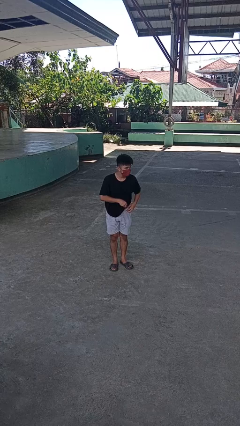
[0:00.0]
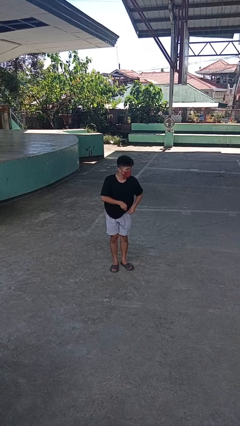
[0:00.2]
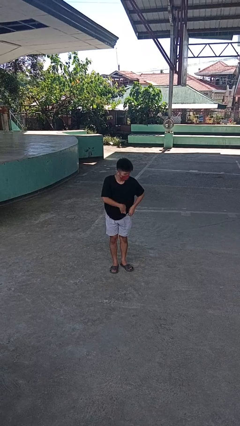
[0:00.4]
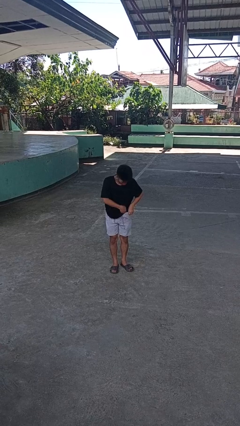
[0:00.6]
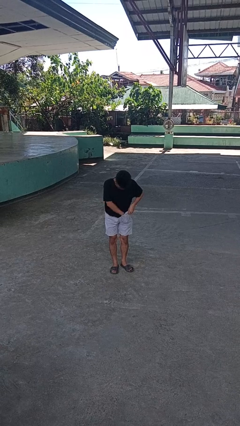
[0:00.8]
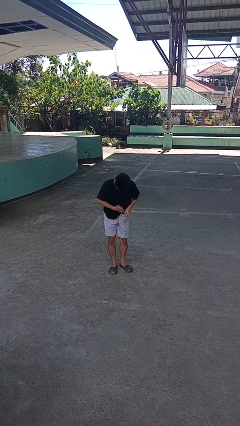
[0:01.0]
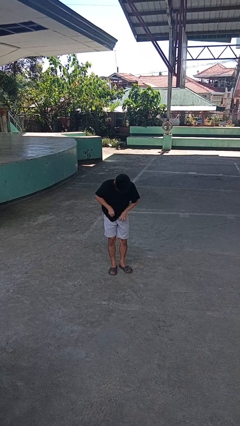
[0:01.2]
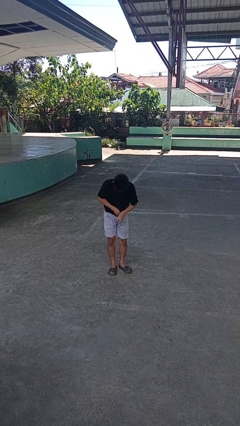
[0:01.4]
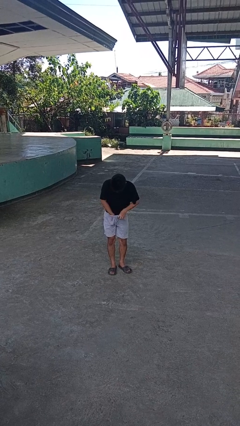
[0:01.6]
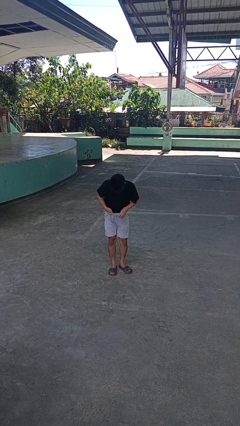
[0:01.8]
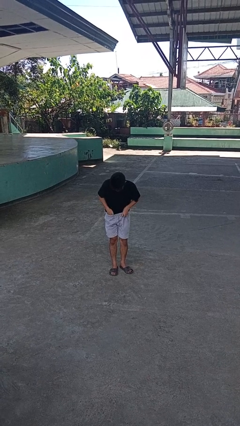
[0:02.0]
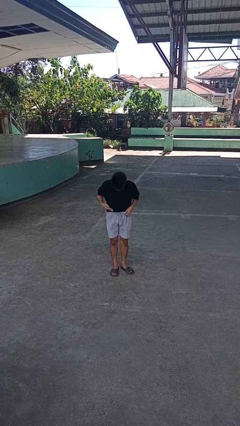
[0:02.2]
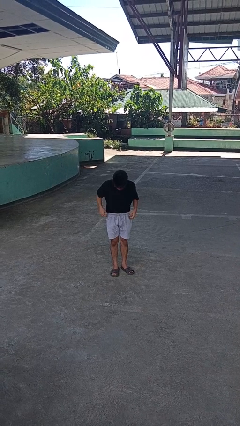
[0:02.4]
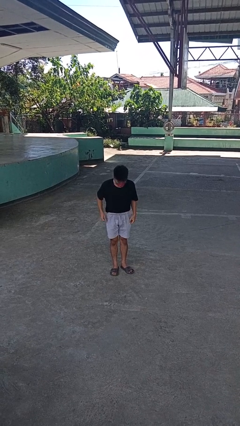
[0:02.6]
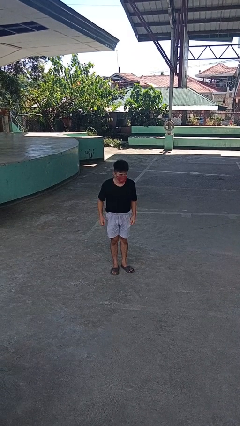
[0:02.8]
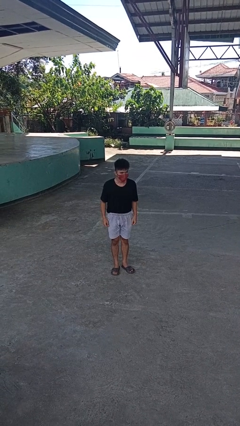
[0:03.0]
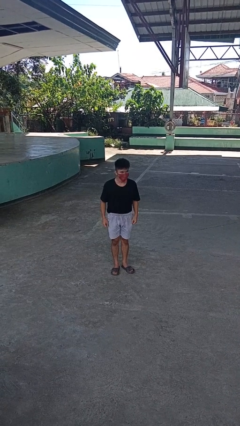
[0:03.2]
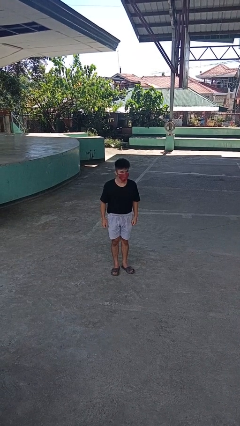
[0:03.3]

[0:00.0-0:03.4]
person tucks in shirt

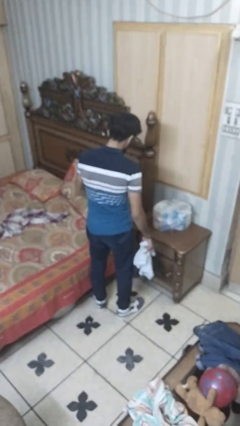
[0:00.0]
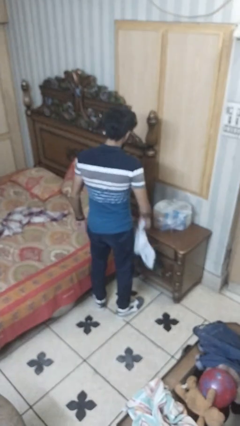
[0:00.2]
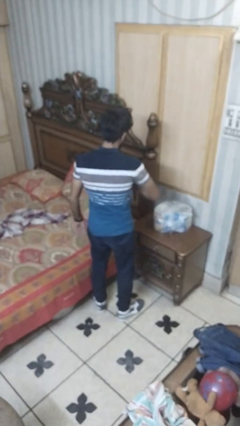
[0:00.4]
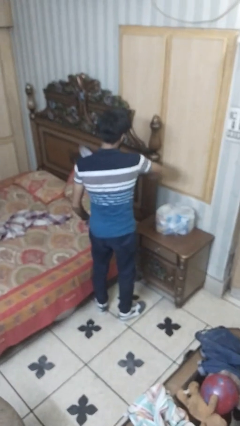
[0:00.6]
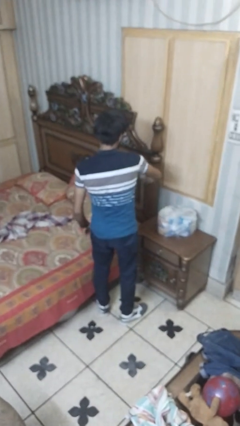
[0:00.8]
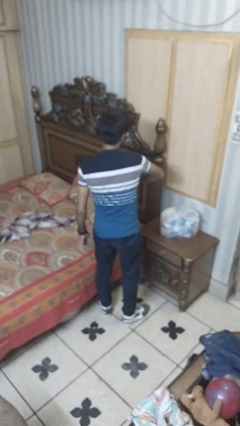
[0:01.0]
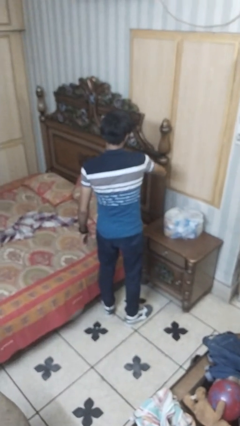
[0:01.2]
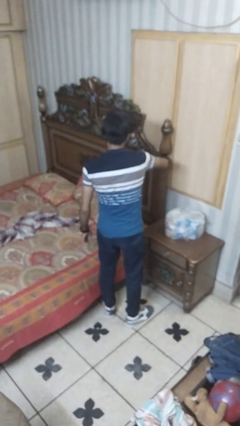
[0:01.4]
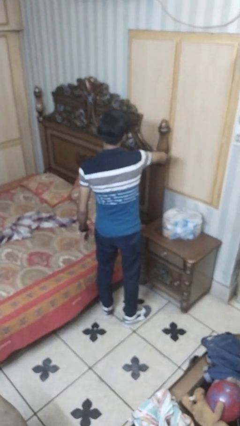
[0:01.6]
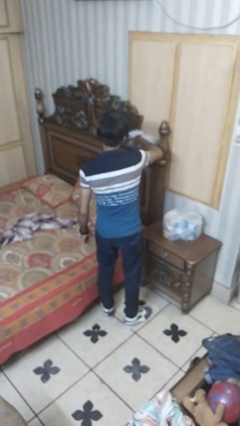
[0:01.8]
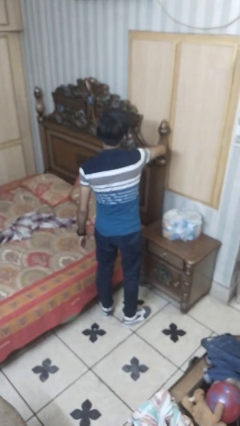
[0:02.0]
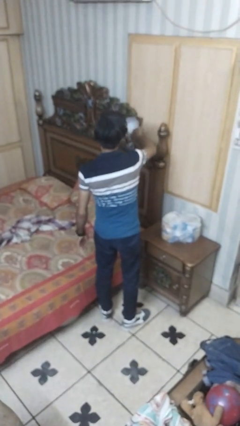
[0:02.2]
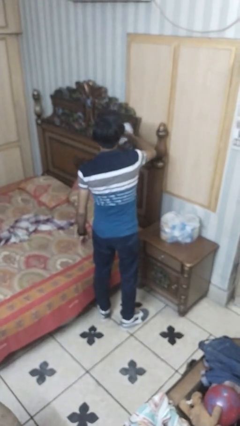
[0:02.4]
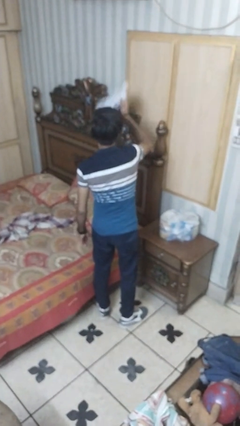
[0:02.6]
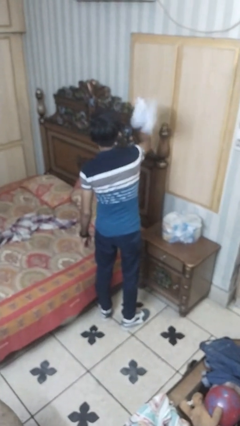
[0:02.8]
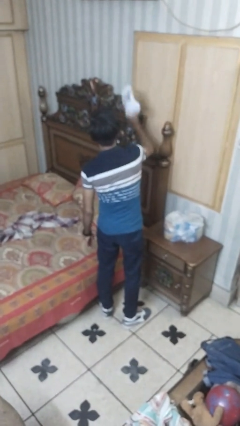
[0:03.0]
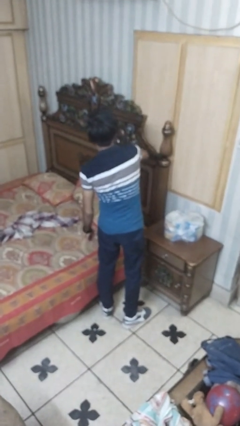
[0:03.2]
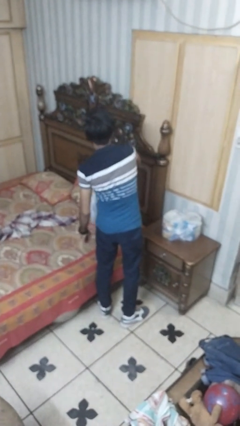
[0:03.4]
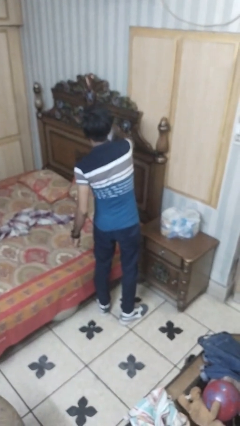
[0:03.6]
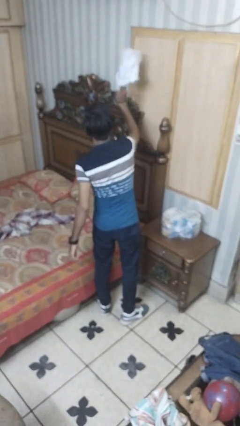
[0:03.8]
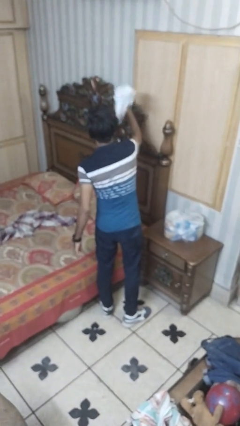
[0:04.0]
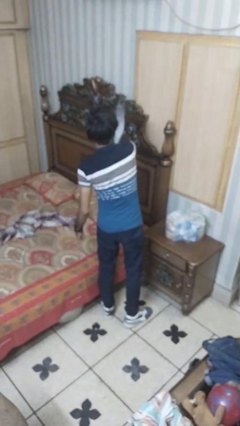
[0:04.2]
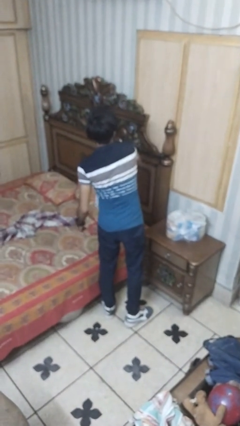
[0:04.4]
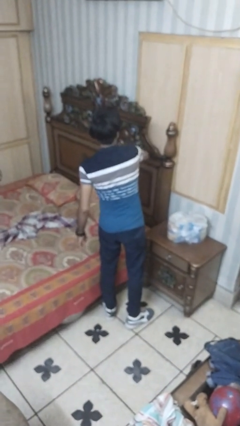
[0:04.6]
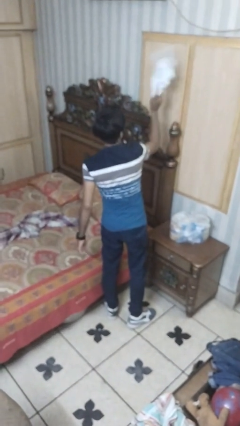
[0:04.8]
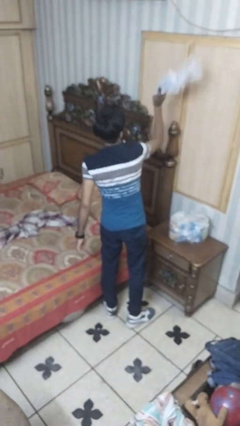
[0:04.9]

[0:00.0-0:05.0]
person dusts furniture

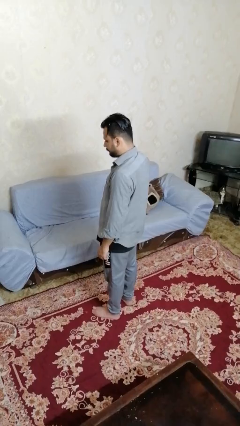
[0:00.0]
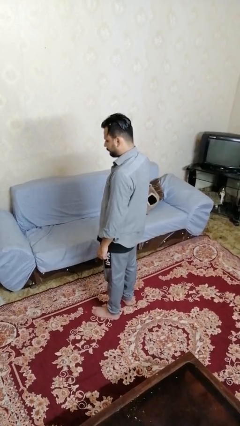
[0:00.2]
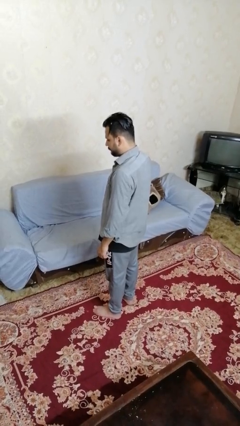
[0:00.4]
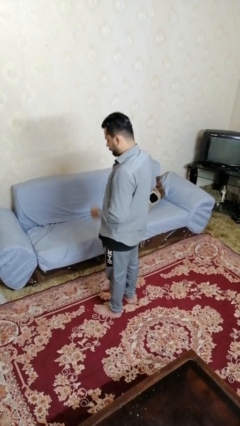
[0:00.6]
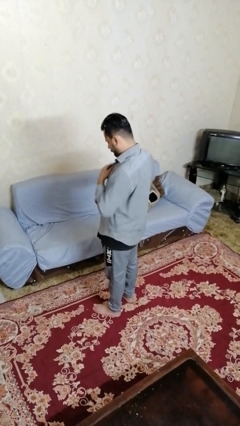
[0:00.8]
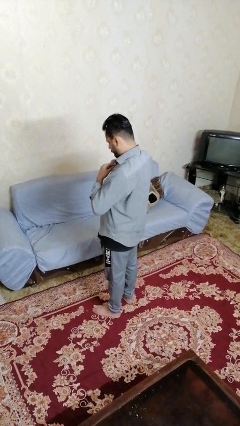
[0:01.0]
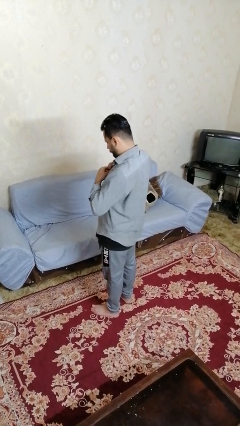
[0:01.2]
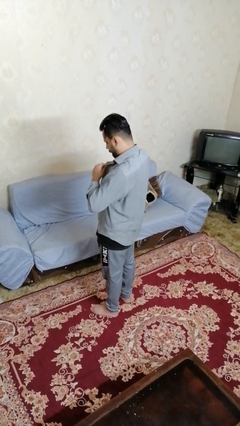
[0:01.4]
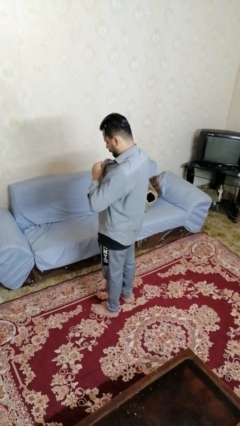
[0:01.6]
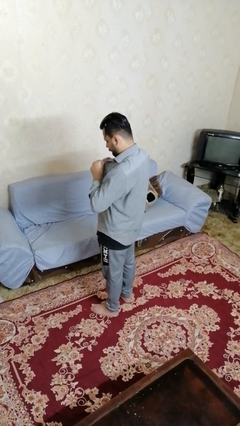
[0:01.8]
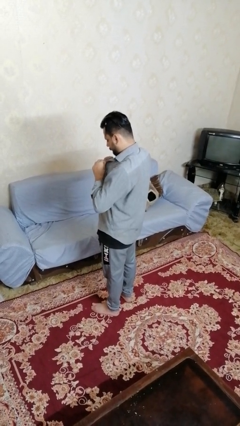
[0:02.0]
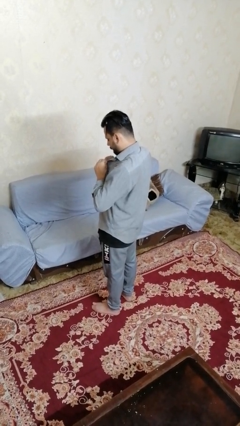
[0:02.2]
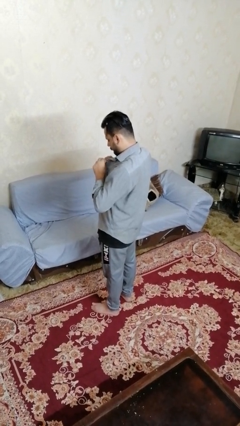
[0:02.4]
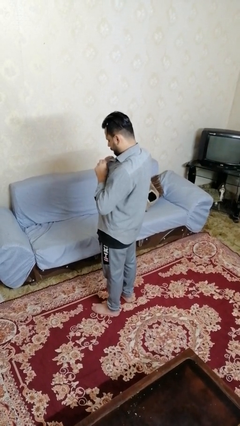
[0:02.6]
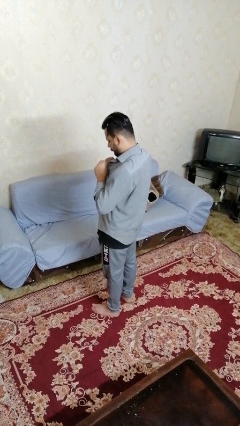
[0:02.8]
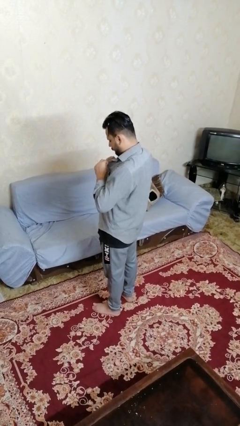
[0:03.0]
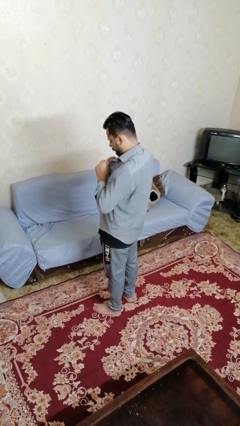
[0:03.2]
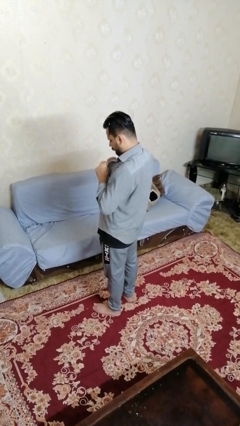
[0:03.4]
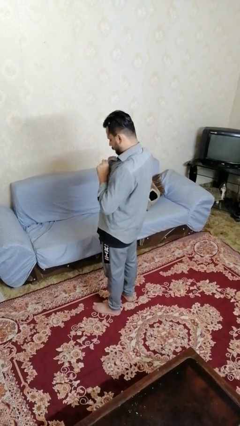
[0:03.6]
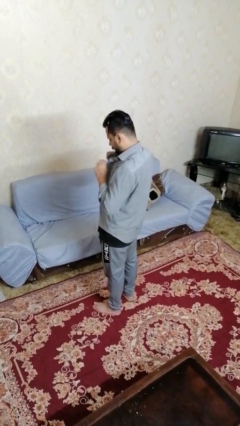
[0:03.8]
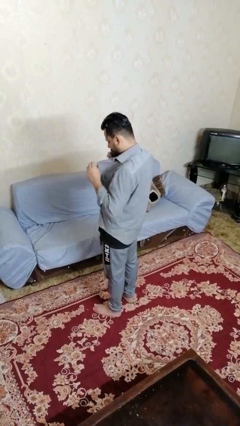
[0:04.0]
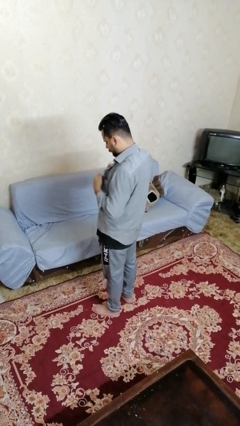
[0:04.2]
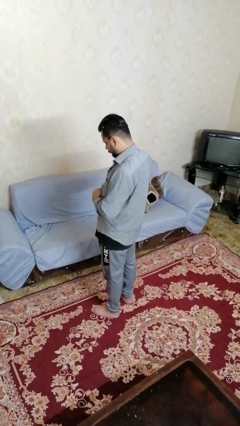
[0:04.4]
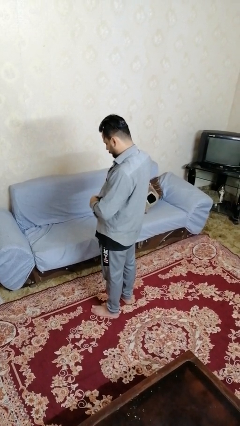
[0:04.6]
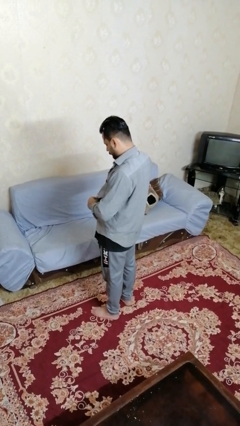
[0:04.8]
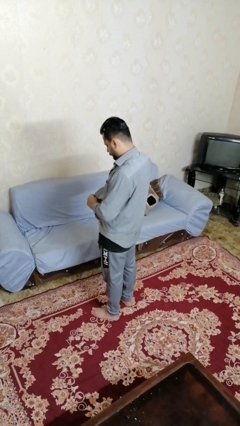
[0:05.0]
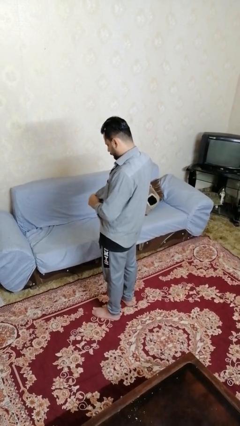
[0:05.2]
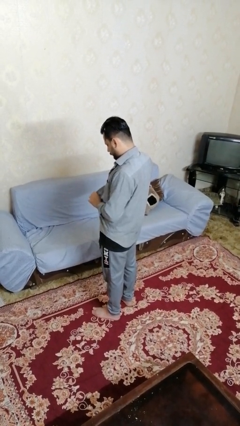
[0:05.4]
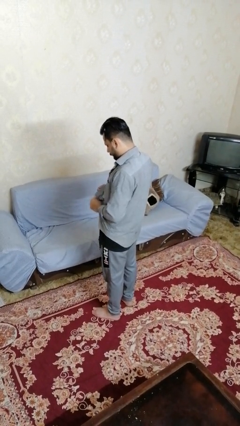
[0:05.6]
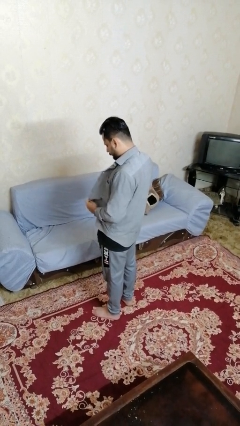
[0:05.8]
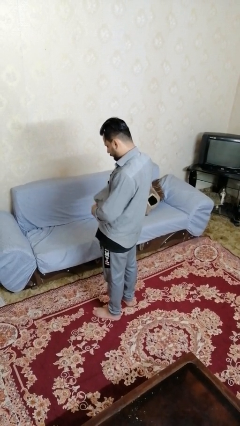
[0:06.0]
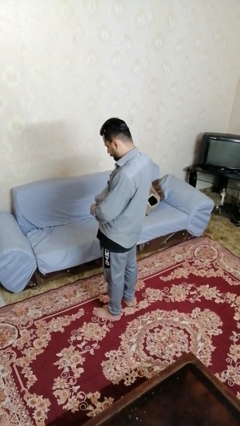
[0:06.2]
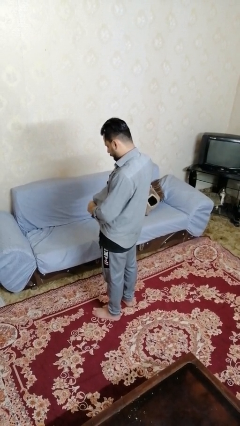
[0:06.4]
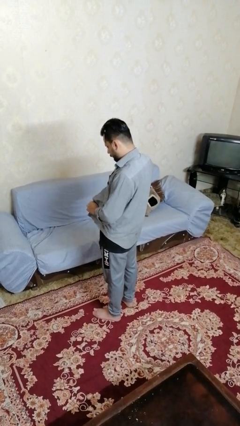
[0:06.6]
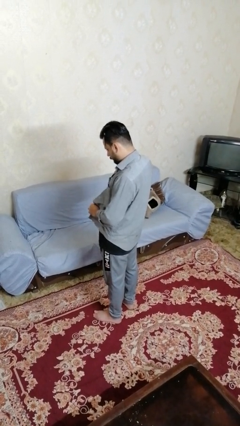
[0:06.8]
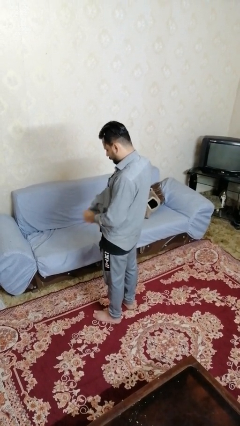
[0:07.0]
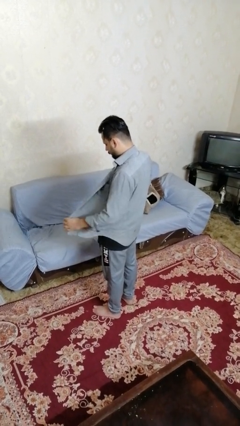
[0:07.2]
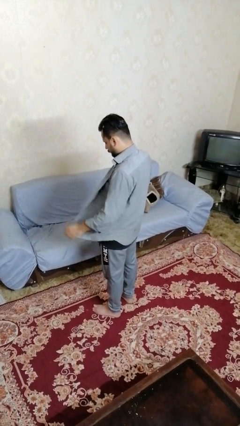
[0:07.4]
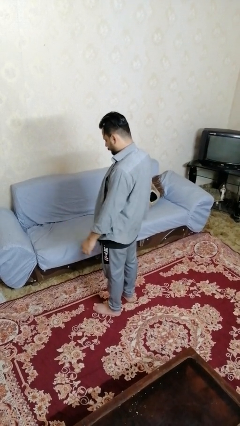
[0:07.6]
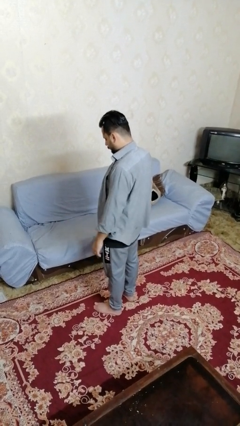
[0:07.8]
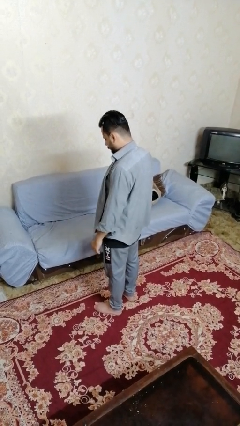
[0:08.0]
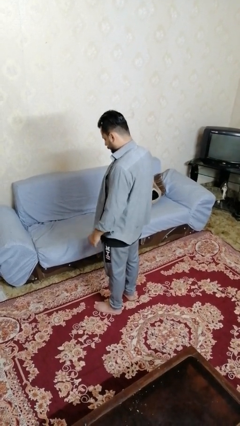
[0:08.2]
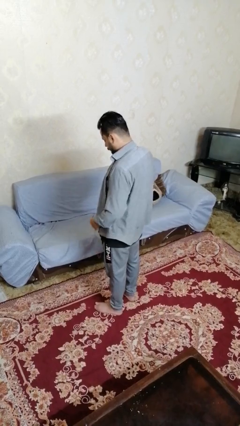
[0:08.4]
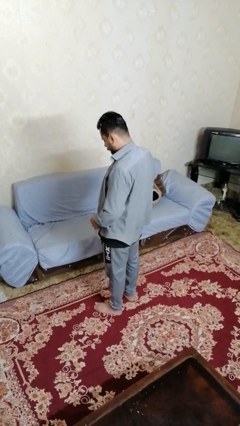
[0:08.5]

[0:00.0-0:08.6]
person unbuttons shirt

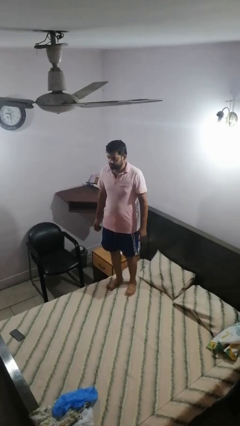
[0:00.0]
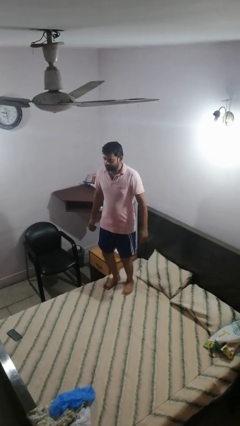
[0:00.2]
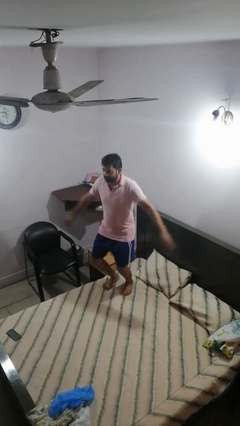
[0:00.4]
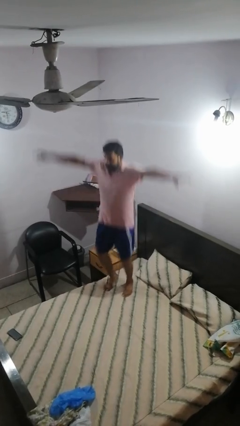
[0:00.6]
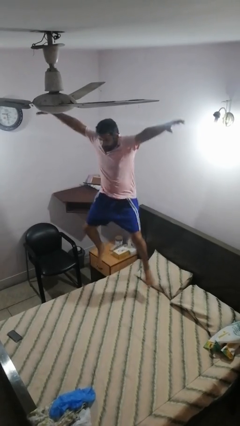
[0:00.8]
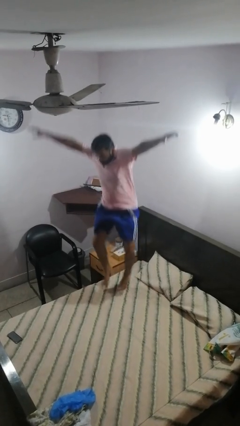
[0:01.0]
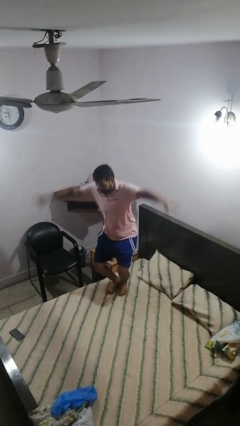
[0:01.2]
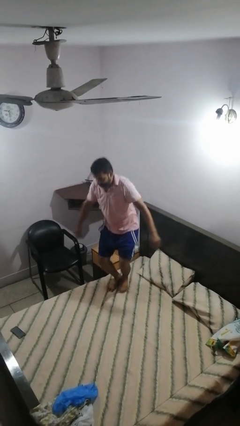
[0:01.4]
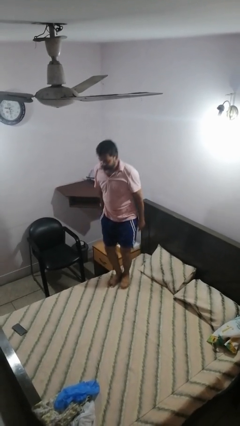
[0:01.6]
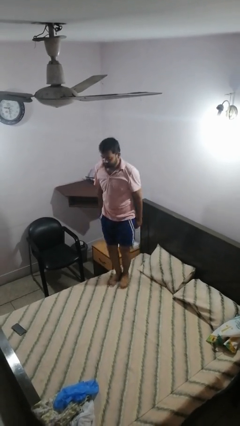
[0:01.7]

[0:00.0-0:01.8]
person jumps on bed
